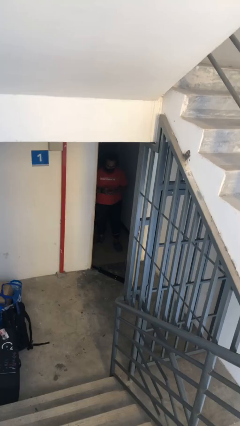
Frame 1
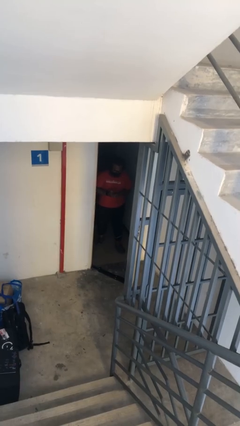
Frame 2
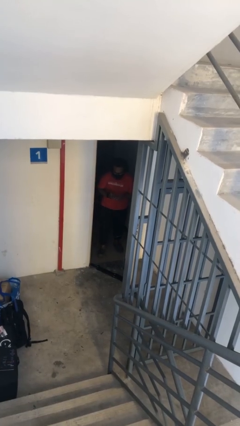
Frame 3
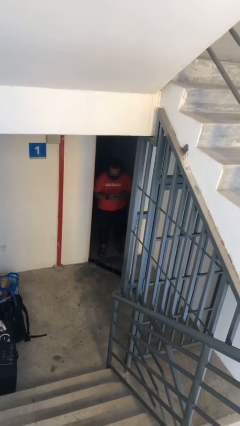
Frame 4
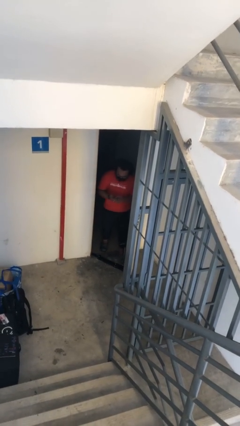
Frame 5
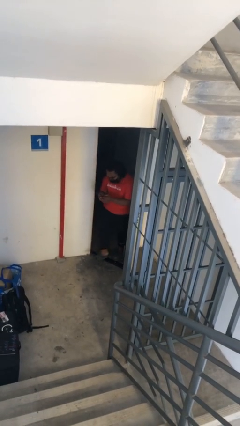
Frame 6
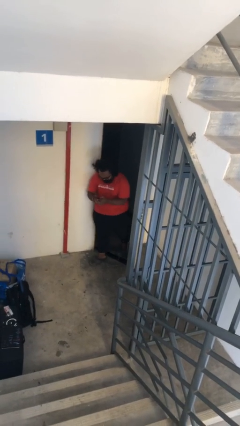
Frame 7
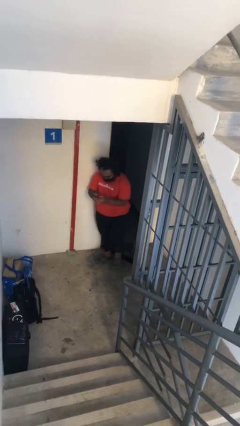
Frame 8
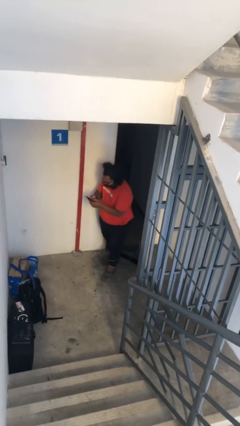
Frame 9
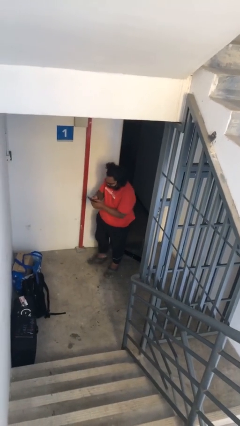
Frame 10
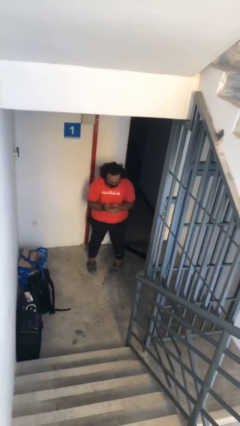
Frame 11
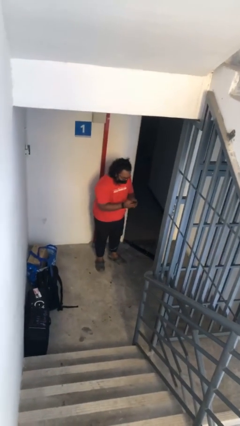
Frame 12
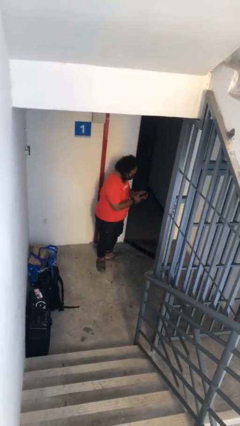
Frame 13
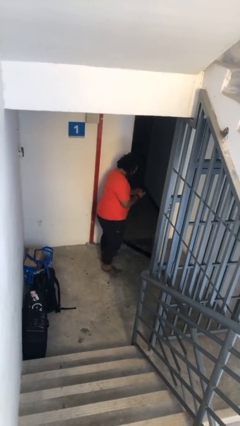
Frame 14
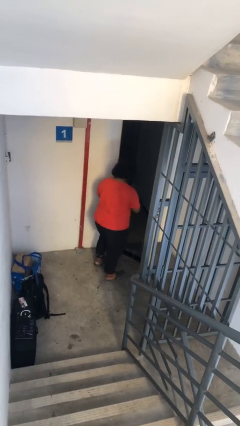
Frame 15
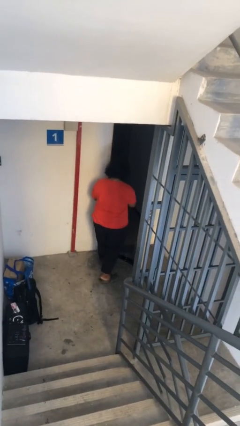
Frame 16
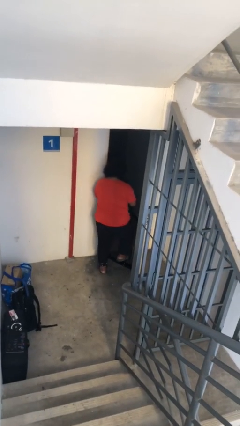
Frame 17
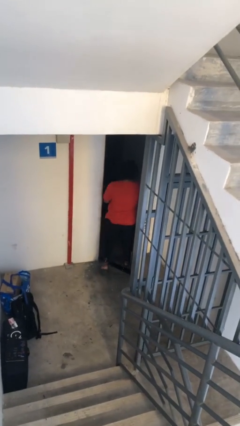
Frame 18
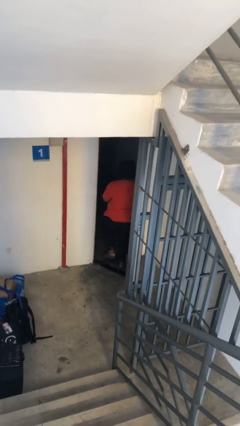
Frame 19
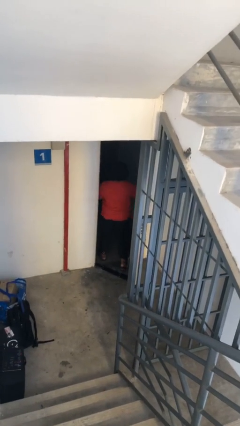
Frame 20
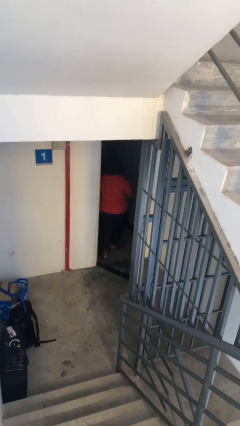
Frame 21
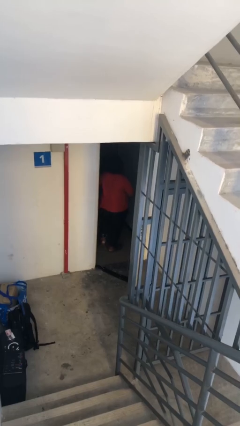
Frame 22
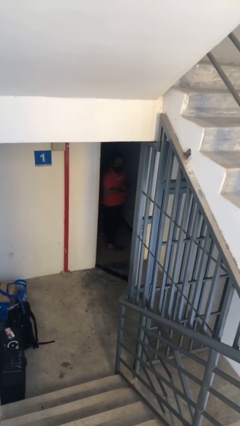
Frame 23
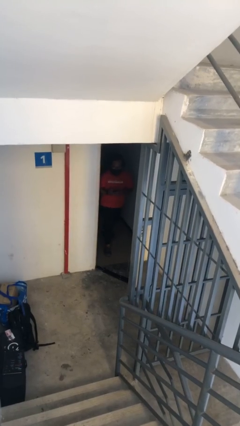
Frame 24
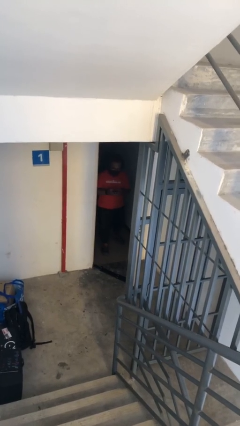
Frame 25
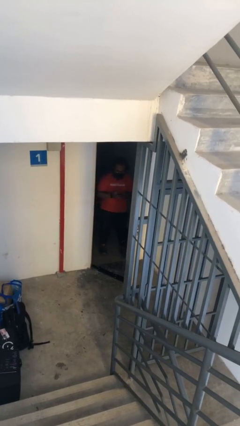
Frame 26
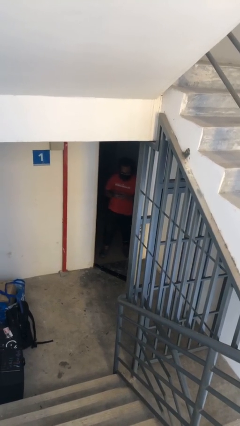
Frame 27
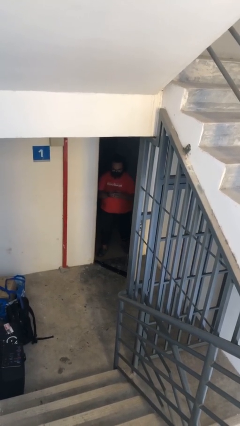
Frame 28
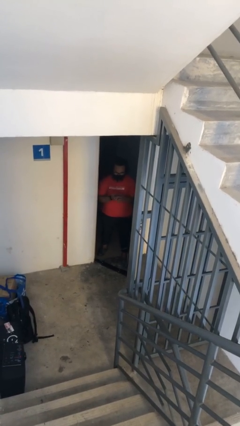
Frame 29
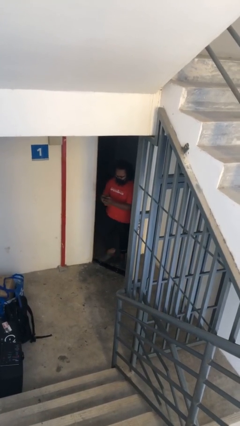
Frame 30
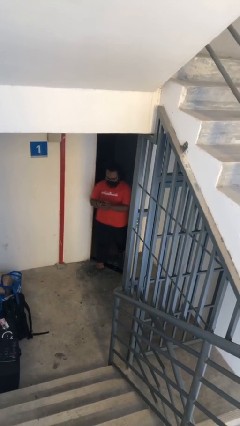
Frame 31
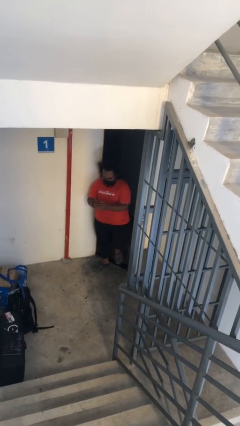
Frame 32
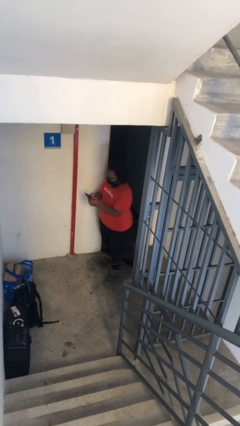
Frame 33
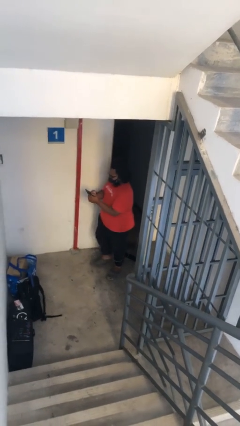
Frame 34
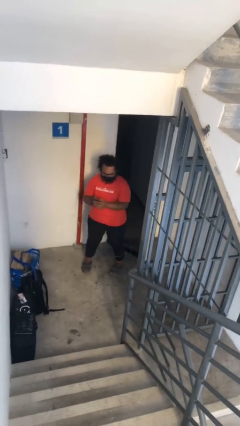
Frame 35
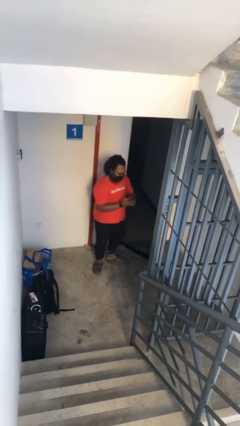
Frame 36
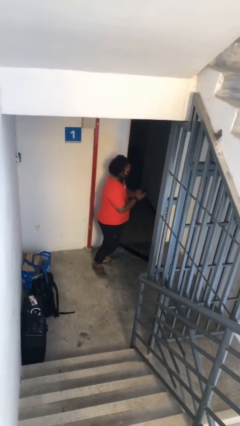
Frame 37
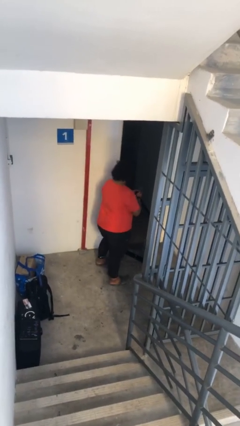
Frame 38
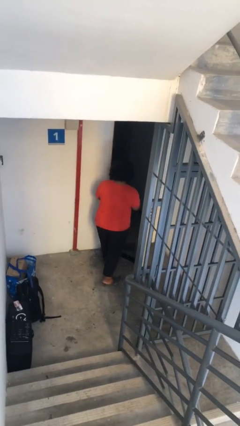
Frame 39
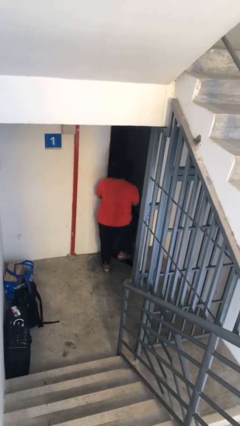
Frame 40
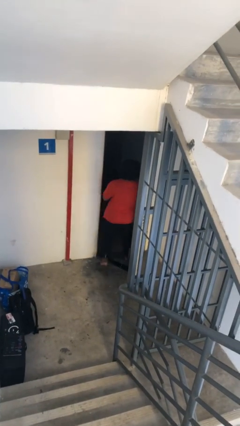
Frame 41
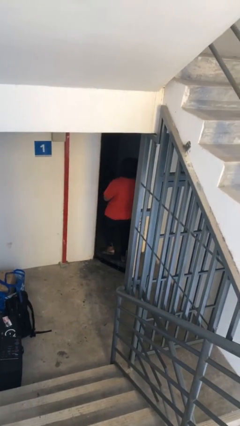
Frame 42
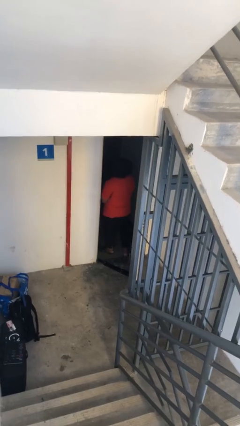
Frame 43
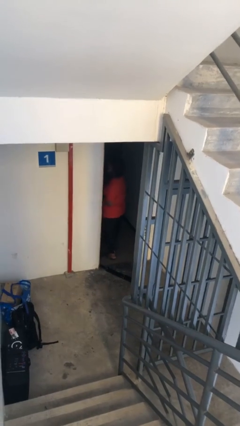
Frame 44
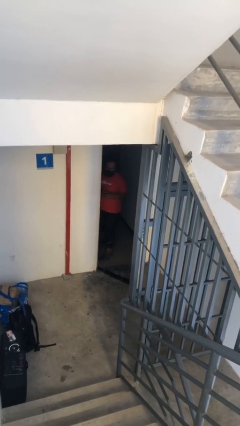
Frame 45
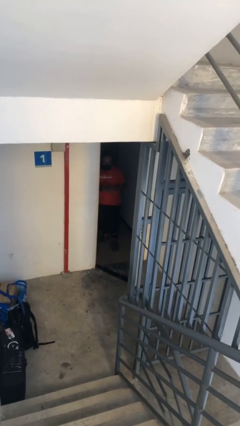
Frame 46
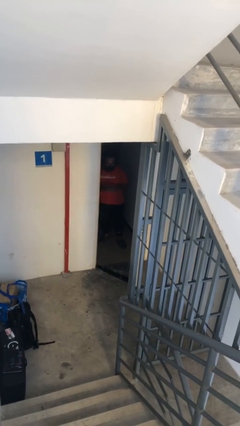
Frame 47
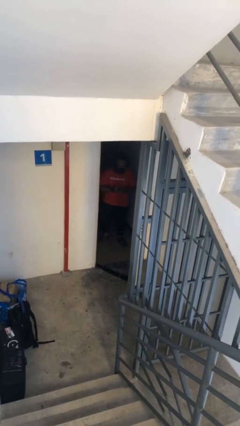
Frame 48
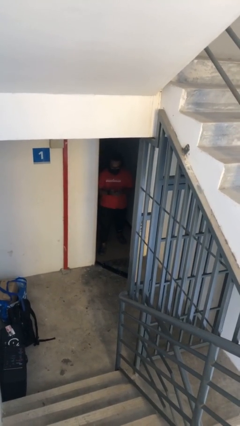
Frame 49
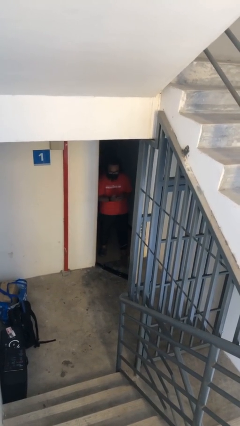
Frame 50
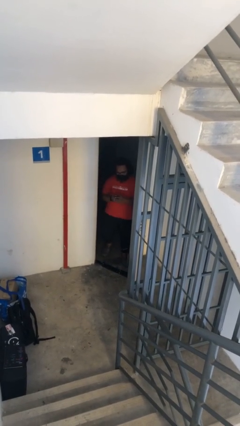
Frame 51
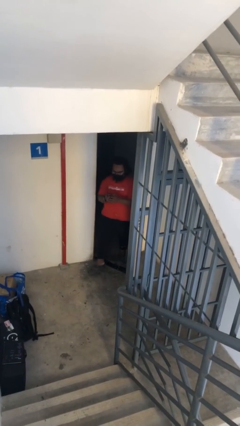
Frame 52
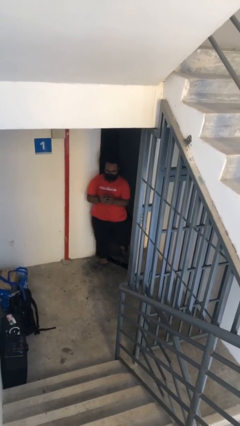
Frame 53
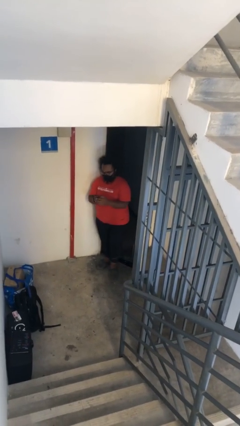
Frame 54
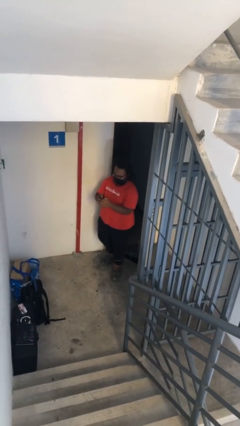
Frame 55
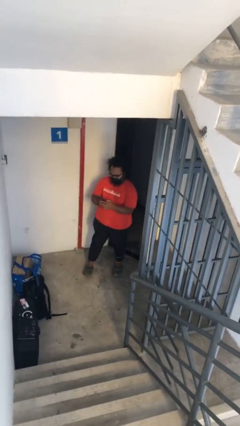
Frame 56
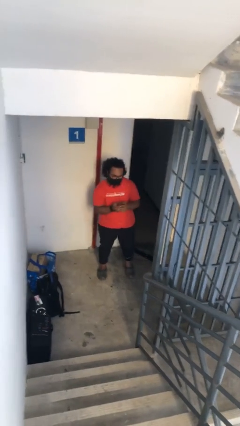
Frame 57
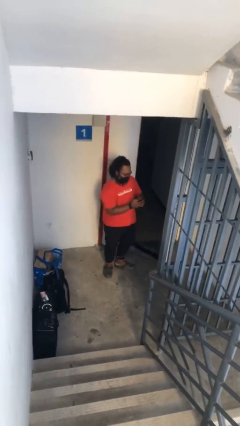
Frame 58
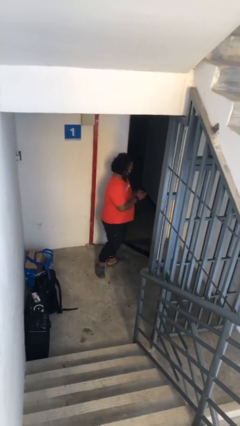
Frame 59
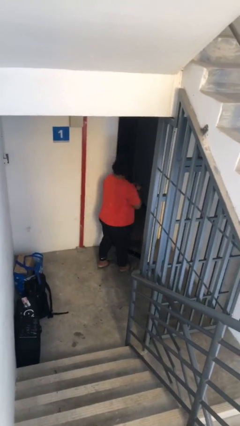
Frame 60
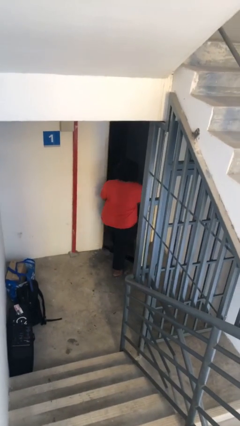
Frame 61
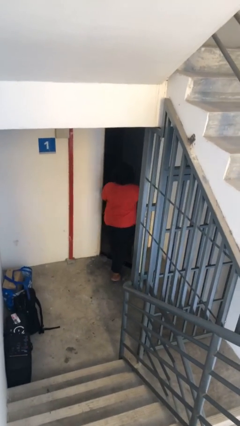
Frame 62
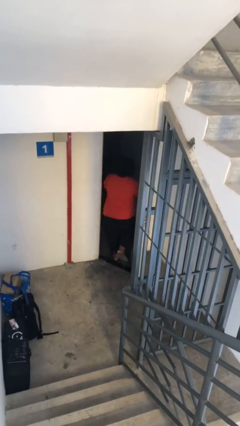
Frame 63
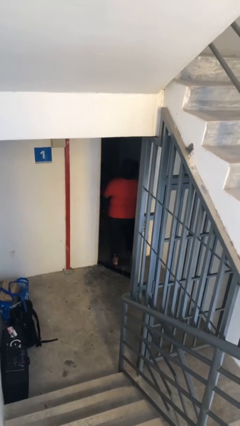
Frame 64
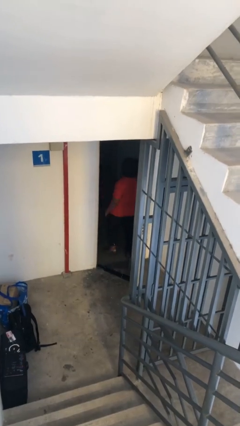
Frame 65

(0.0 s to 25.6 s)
person texts on phone

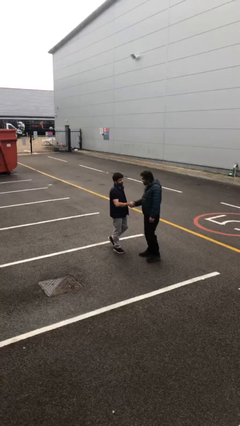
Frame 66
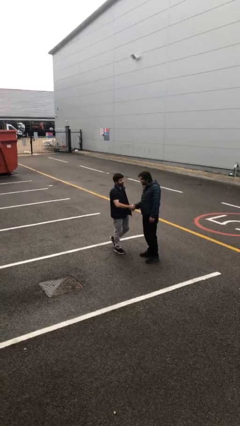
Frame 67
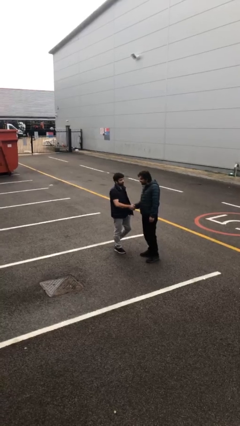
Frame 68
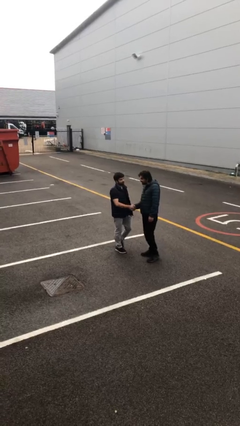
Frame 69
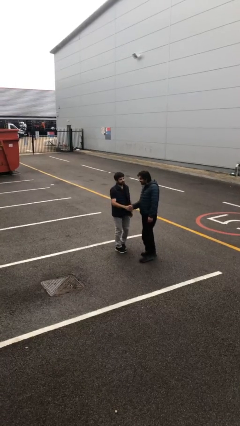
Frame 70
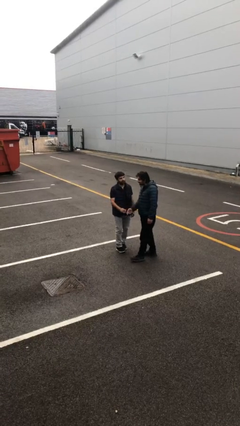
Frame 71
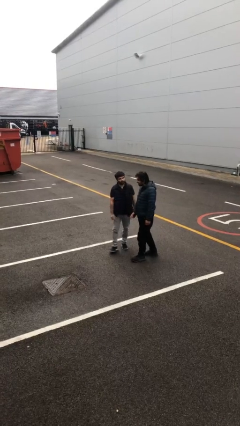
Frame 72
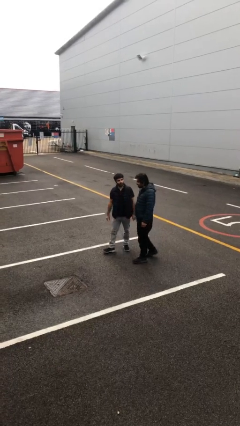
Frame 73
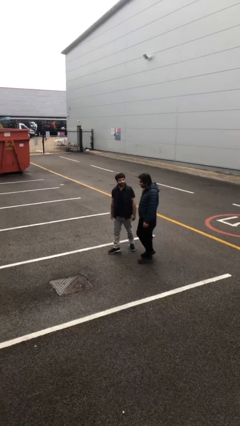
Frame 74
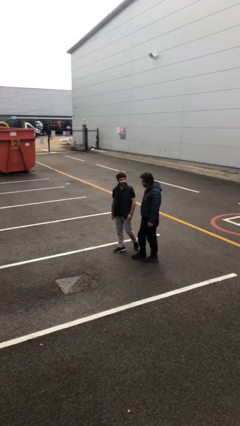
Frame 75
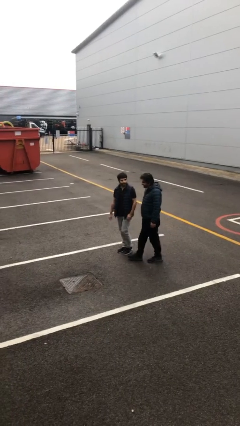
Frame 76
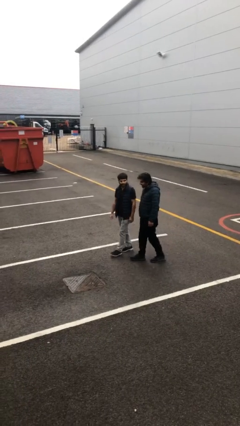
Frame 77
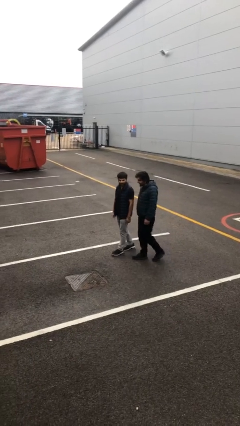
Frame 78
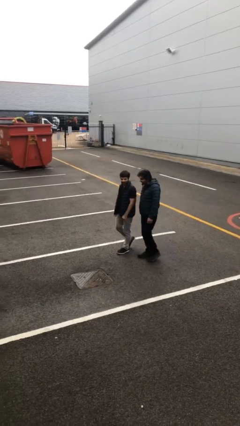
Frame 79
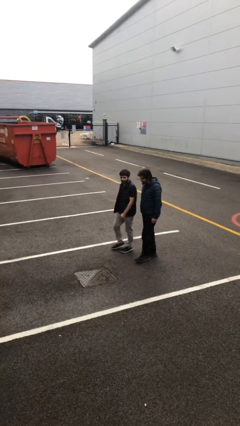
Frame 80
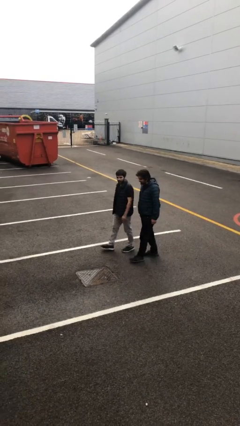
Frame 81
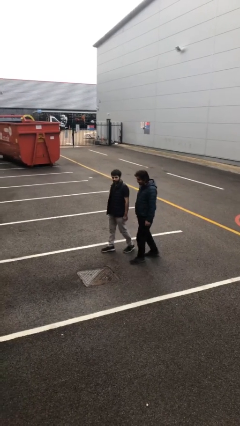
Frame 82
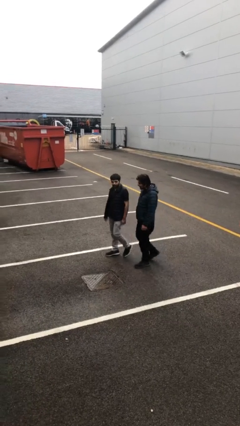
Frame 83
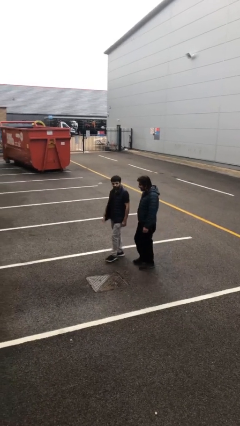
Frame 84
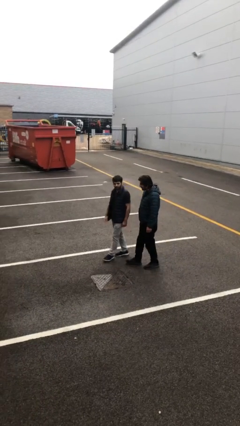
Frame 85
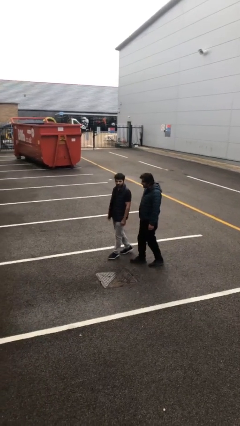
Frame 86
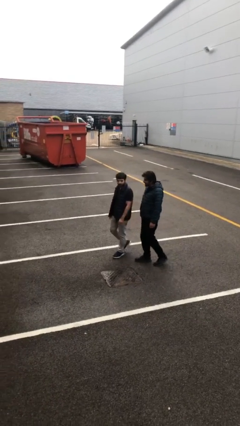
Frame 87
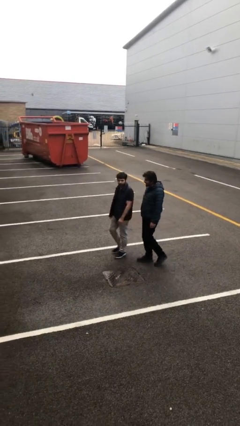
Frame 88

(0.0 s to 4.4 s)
person talks to person

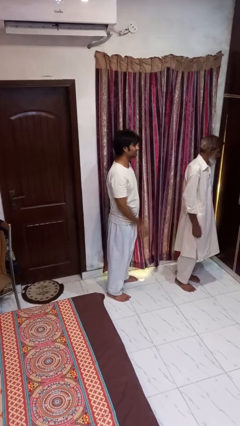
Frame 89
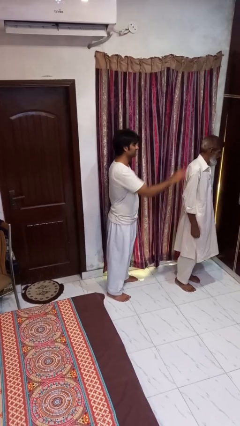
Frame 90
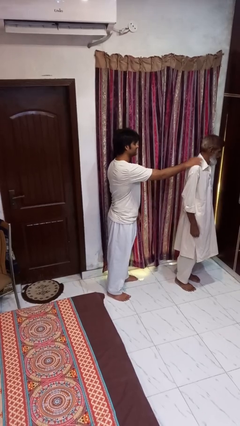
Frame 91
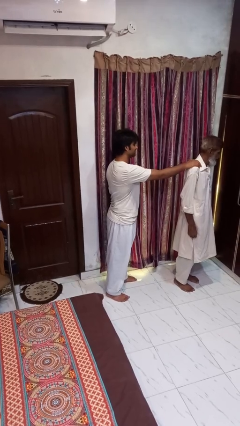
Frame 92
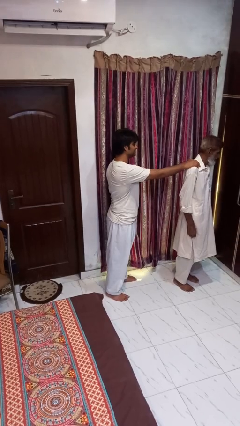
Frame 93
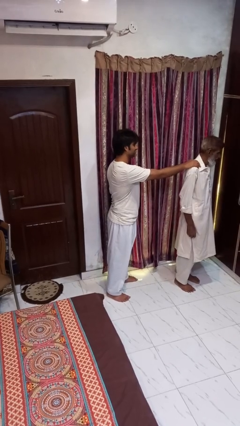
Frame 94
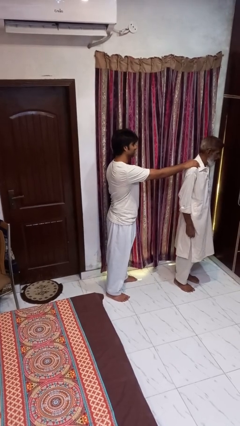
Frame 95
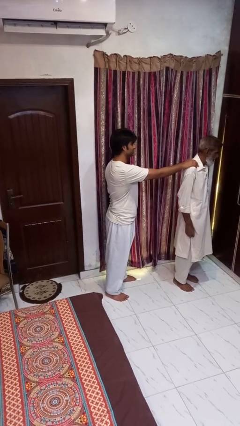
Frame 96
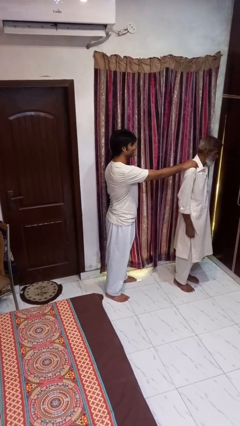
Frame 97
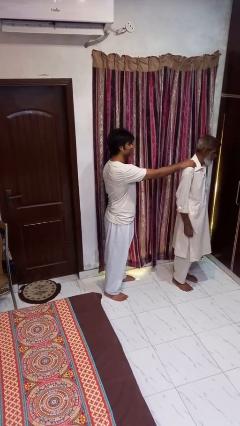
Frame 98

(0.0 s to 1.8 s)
person grabs person by shoulder
